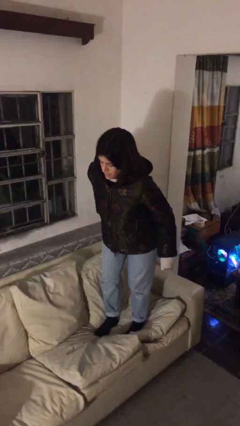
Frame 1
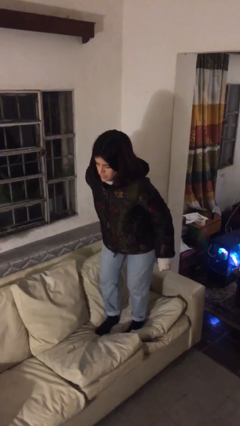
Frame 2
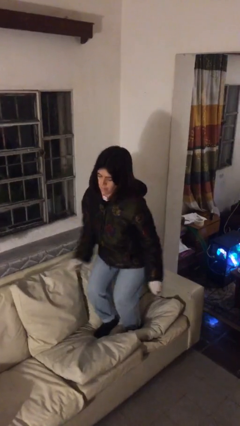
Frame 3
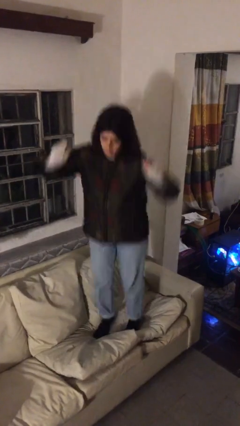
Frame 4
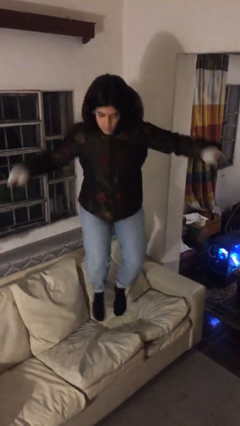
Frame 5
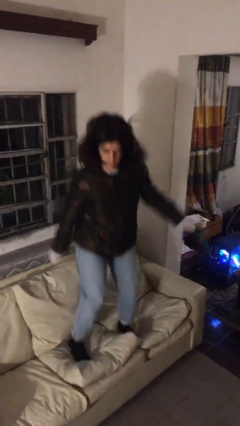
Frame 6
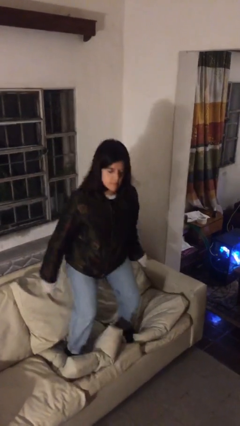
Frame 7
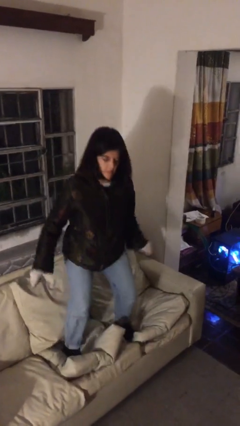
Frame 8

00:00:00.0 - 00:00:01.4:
person jumps on couch

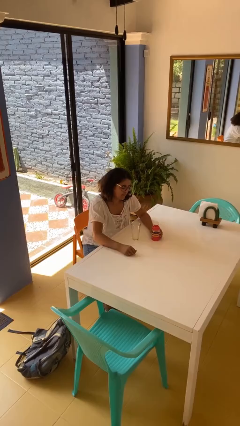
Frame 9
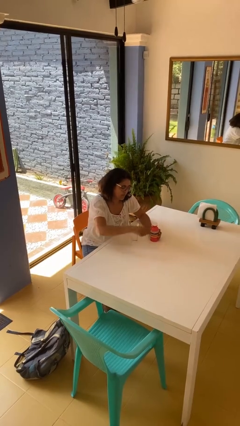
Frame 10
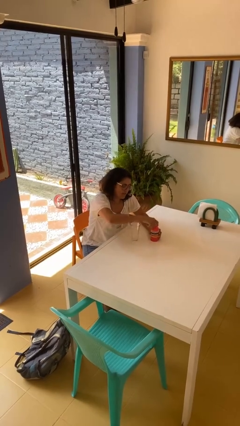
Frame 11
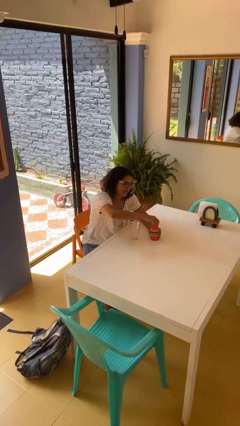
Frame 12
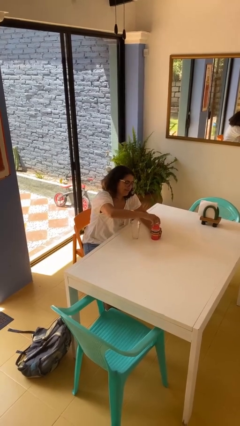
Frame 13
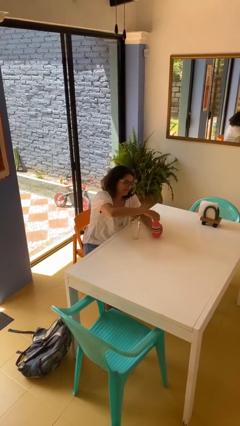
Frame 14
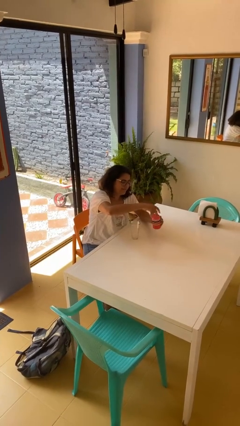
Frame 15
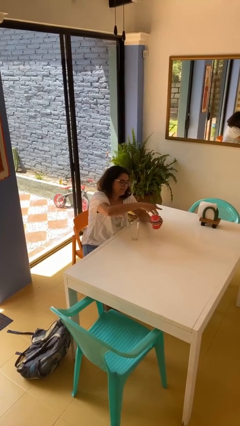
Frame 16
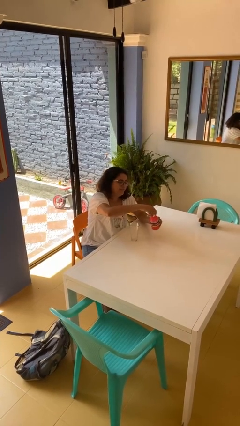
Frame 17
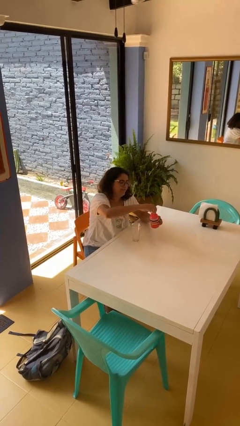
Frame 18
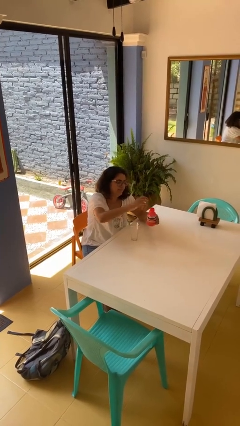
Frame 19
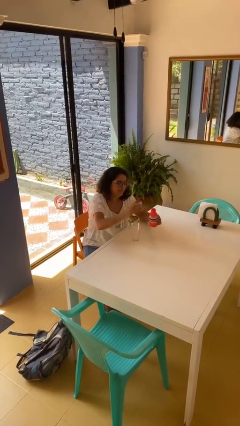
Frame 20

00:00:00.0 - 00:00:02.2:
person unscrews lid from bottle

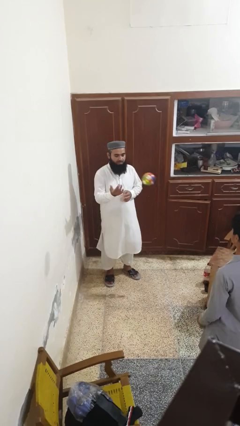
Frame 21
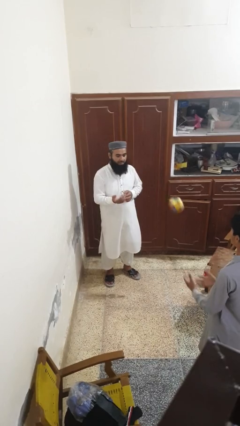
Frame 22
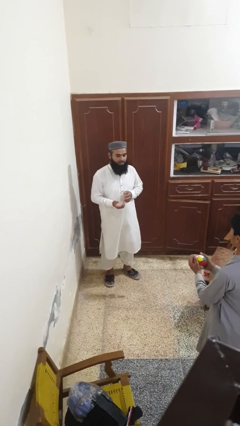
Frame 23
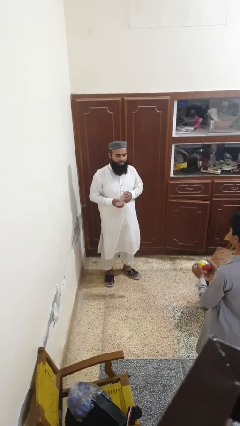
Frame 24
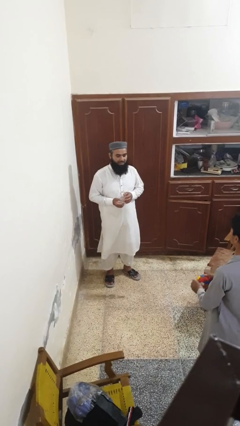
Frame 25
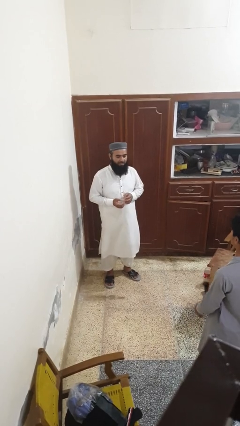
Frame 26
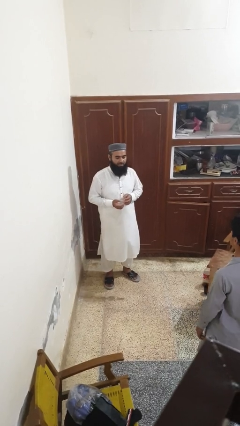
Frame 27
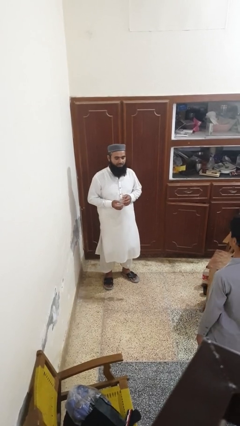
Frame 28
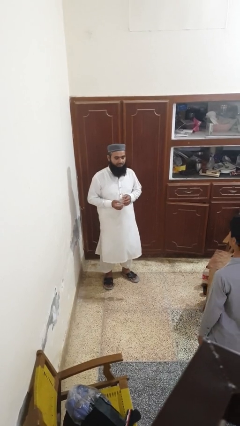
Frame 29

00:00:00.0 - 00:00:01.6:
person throws object to person

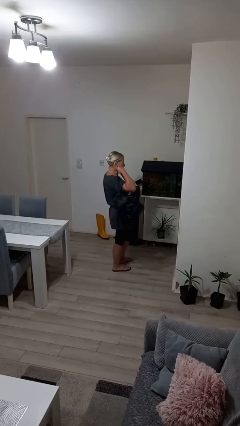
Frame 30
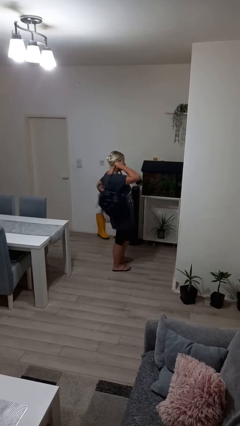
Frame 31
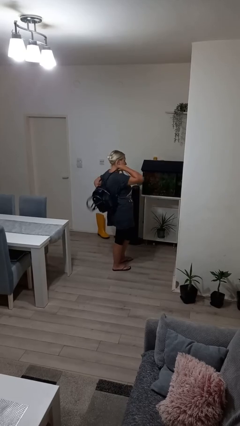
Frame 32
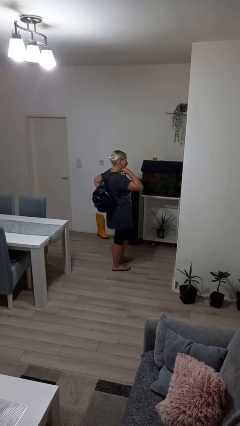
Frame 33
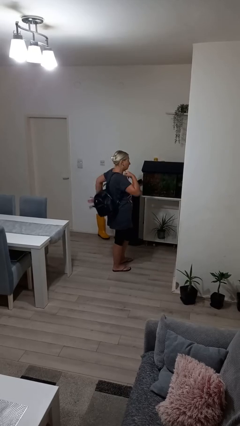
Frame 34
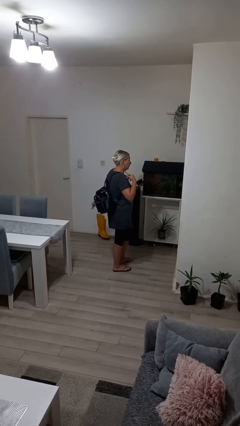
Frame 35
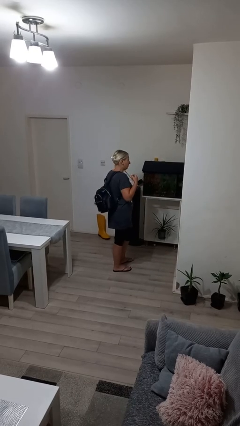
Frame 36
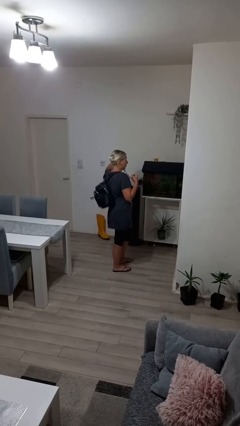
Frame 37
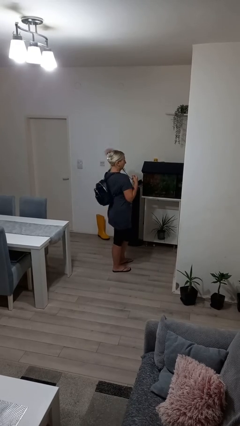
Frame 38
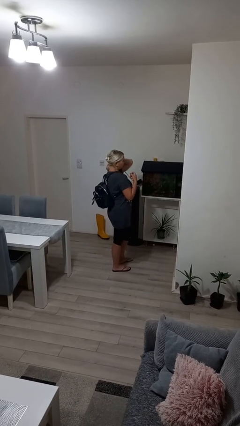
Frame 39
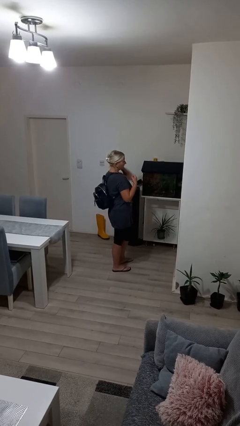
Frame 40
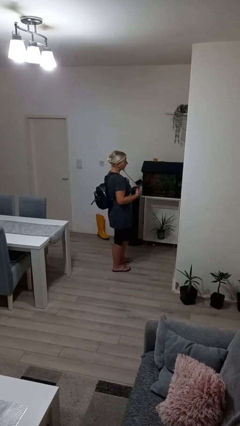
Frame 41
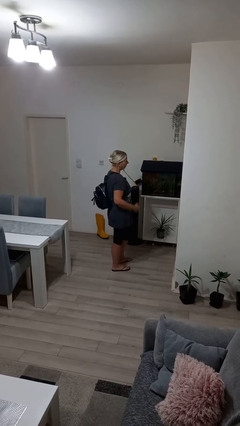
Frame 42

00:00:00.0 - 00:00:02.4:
person puts on backpack

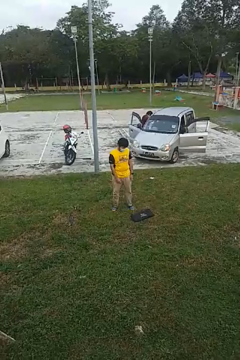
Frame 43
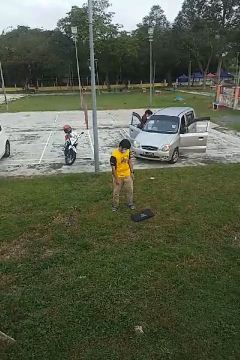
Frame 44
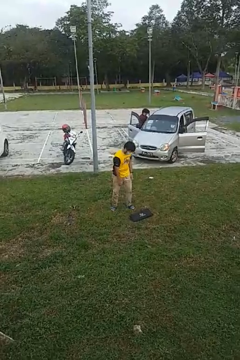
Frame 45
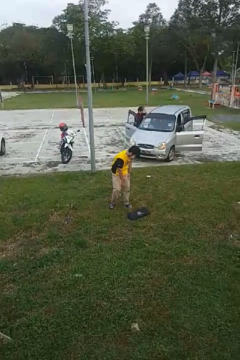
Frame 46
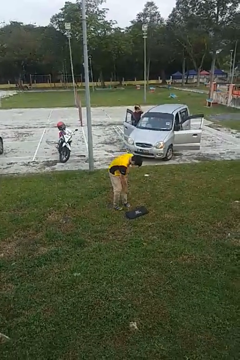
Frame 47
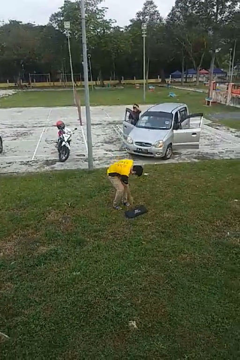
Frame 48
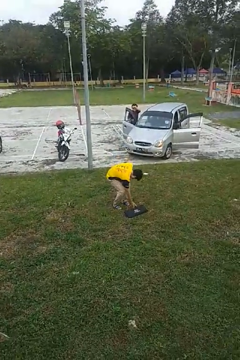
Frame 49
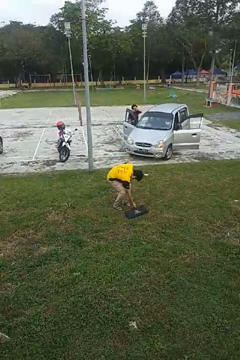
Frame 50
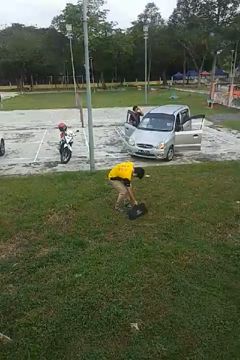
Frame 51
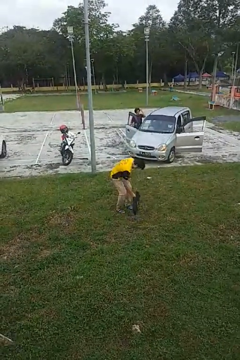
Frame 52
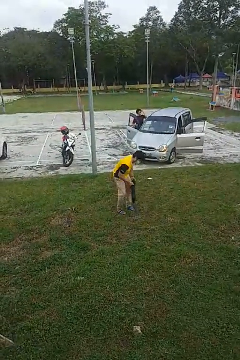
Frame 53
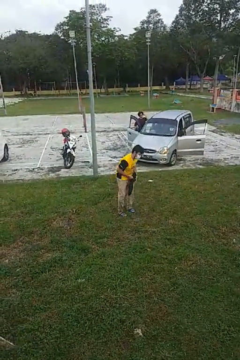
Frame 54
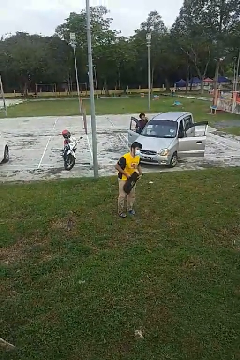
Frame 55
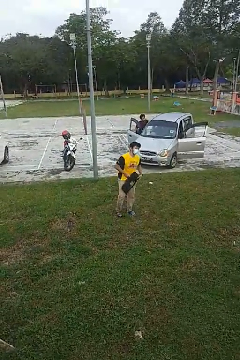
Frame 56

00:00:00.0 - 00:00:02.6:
person picks up object from floor

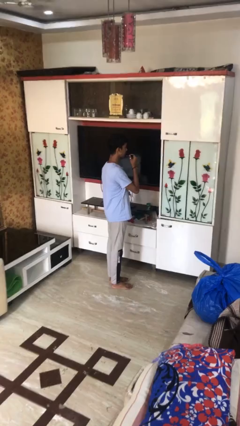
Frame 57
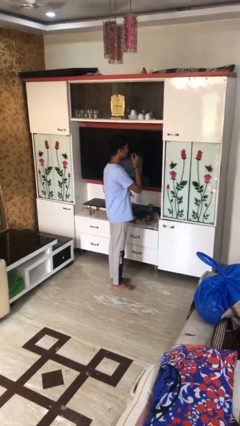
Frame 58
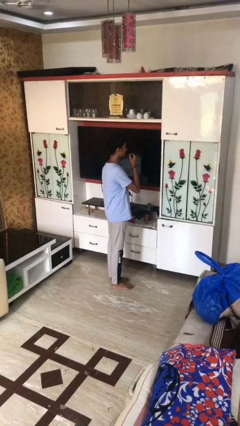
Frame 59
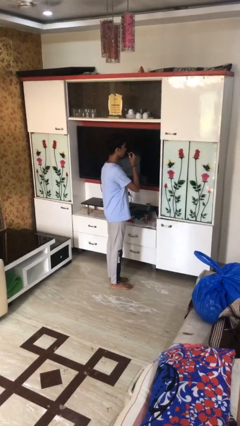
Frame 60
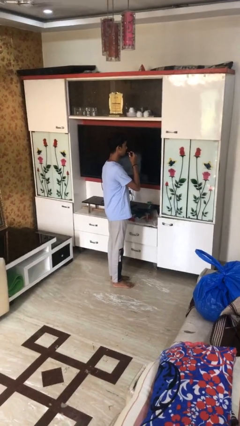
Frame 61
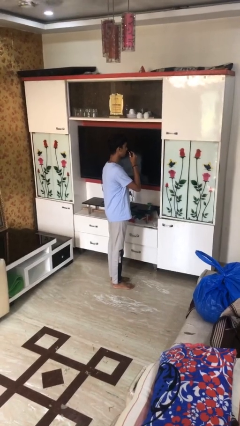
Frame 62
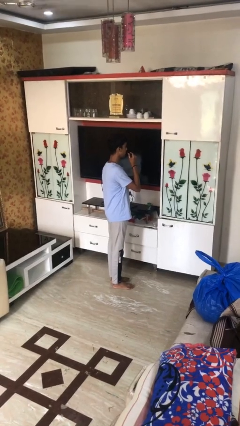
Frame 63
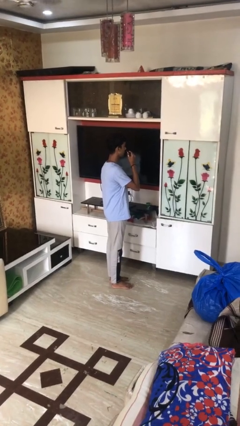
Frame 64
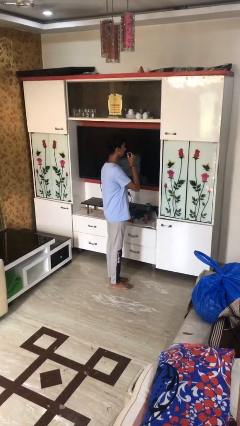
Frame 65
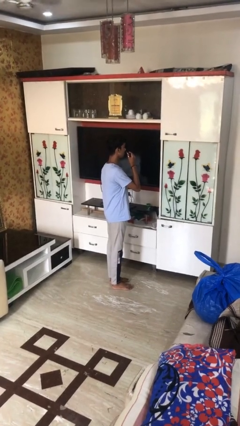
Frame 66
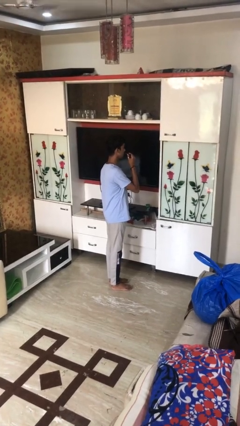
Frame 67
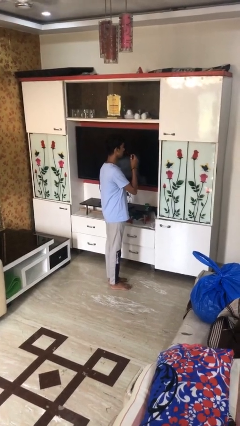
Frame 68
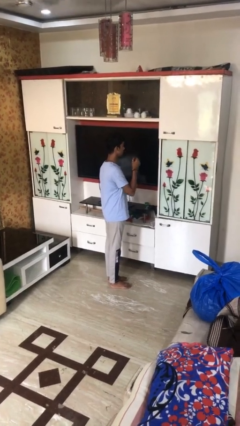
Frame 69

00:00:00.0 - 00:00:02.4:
person applies lip makeup

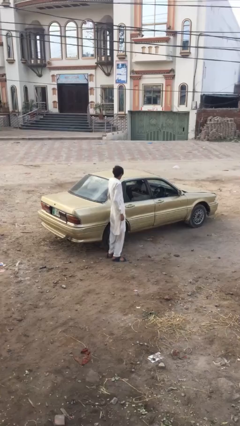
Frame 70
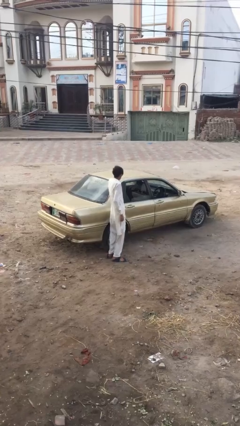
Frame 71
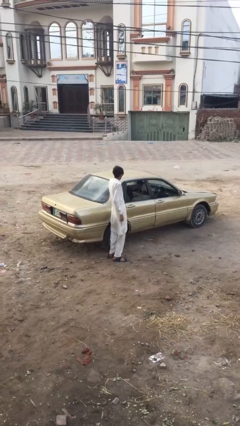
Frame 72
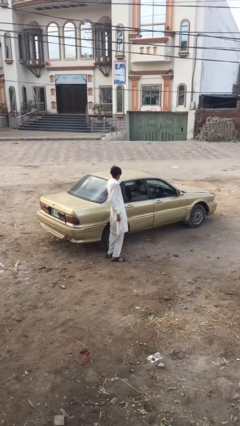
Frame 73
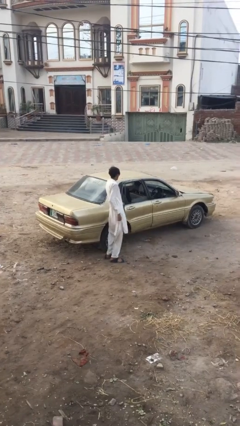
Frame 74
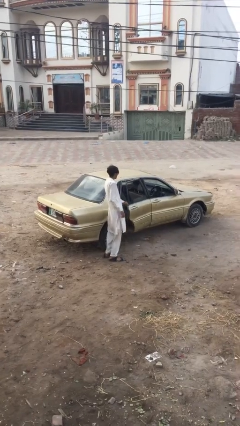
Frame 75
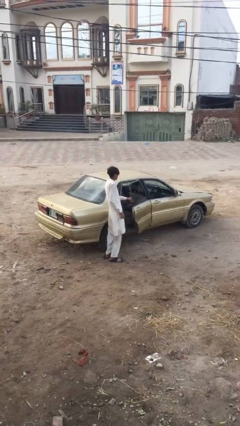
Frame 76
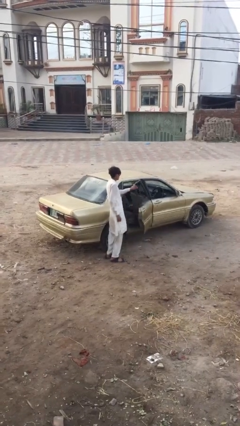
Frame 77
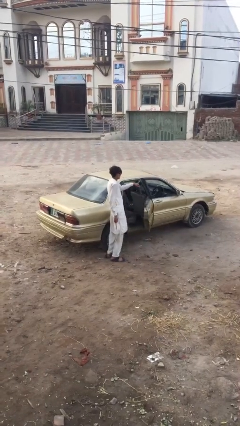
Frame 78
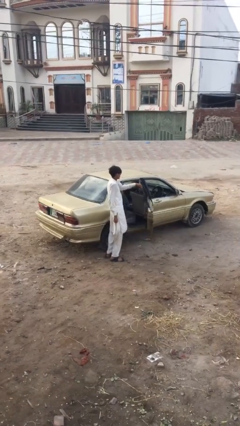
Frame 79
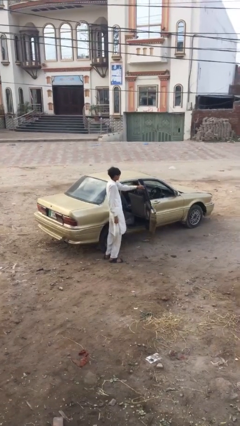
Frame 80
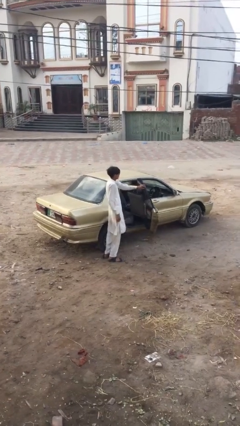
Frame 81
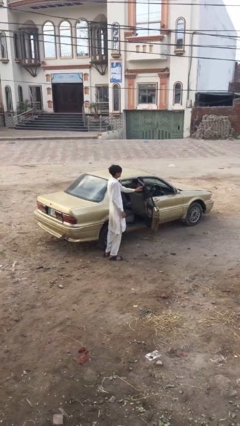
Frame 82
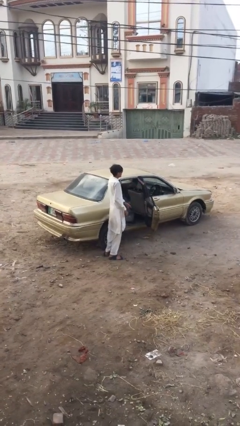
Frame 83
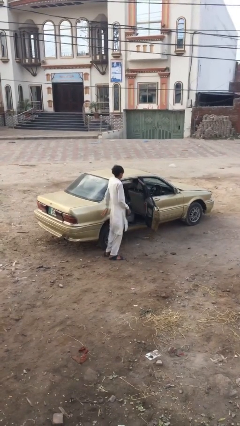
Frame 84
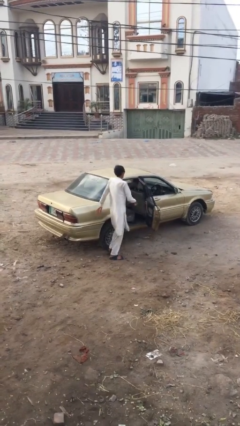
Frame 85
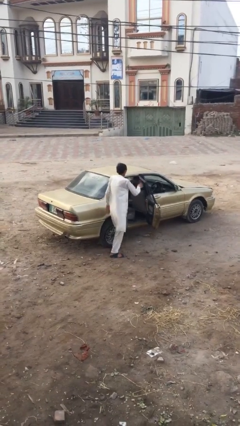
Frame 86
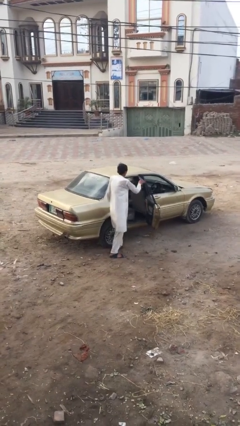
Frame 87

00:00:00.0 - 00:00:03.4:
person opens car door

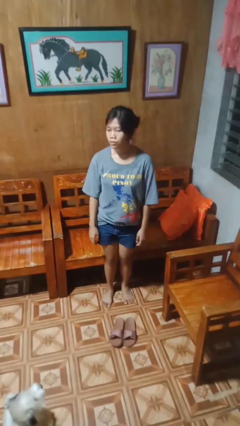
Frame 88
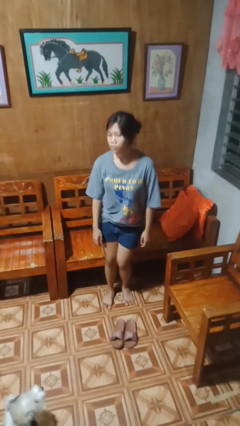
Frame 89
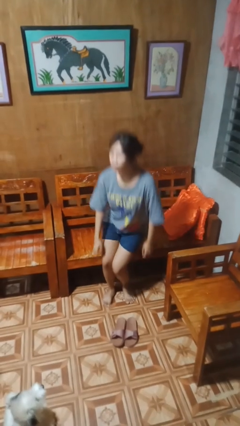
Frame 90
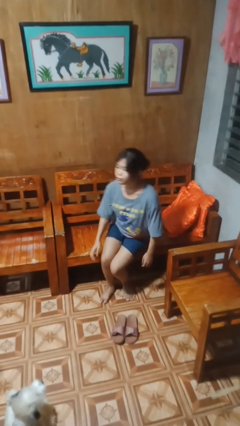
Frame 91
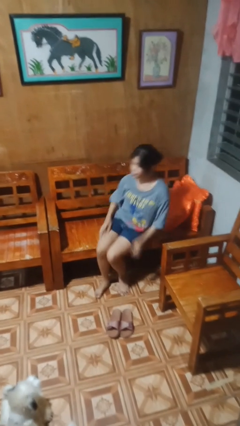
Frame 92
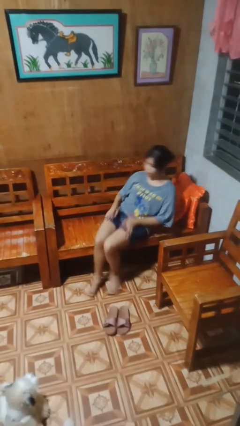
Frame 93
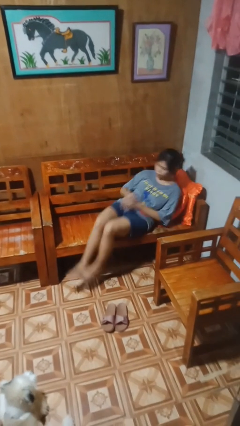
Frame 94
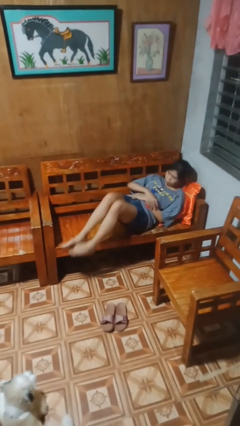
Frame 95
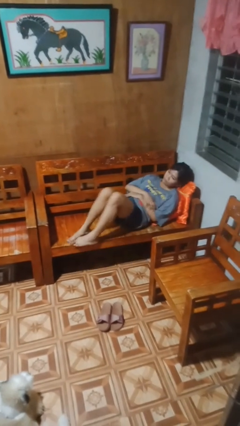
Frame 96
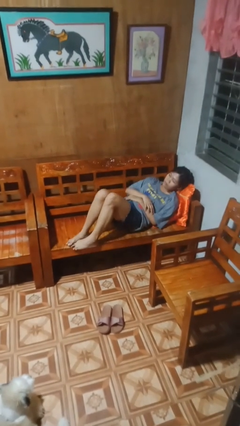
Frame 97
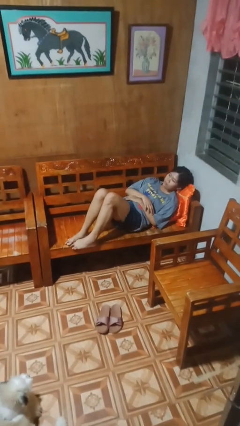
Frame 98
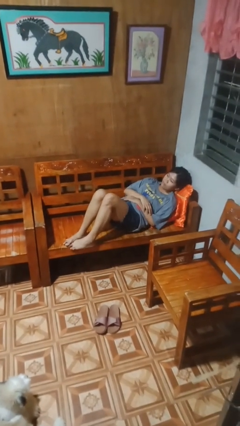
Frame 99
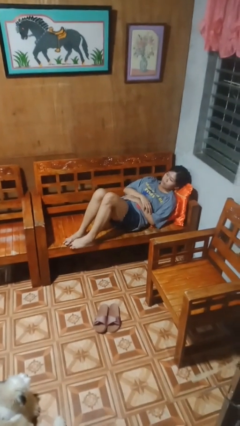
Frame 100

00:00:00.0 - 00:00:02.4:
person lies down on couch
